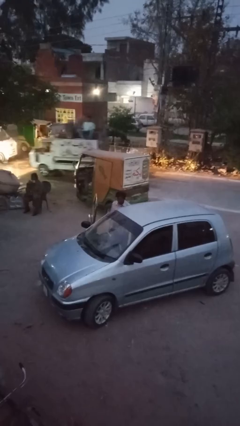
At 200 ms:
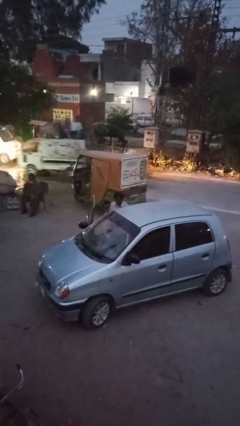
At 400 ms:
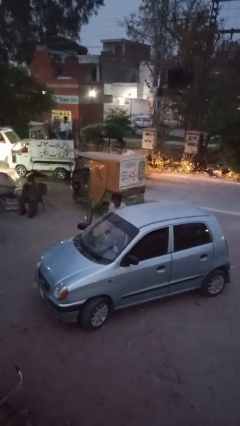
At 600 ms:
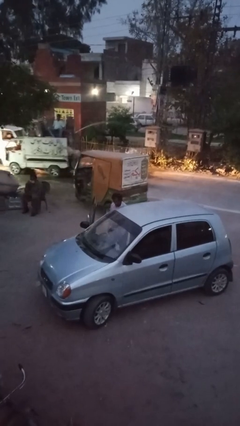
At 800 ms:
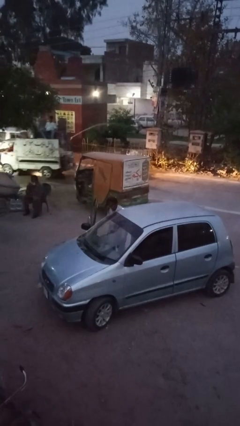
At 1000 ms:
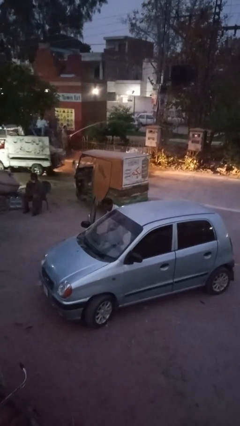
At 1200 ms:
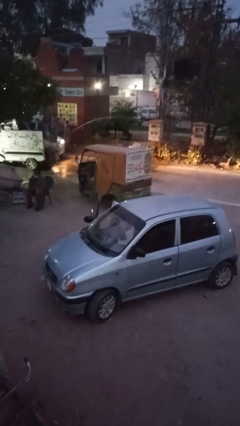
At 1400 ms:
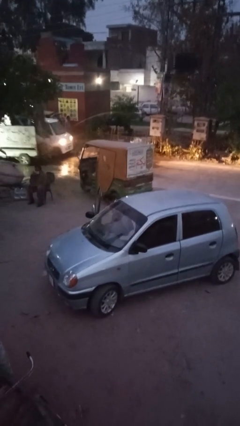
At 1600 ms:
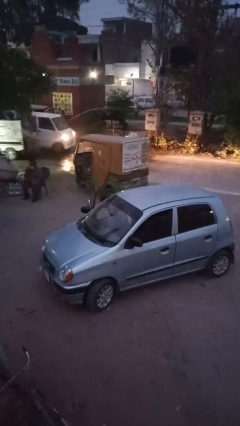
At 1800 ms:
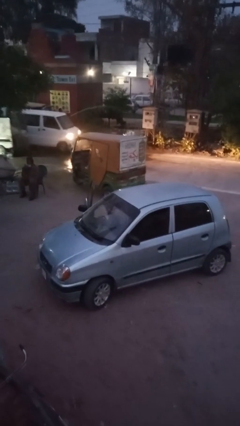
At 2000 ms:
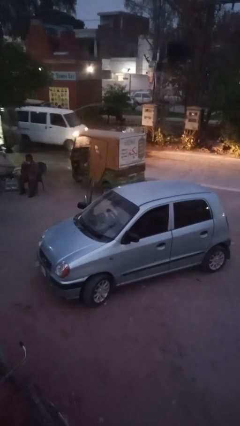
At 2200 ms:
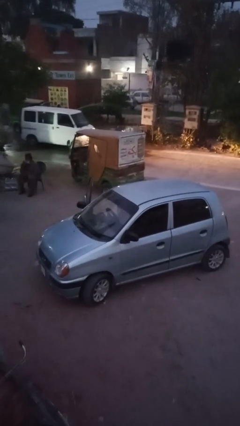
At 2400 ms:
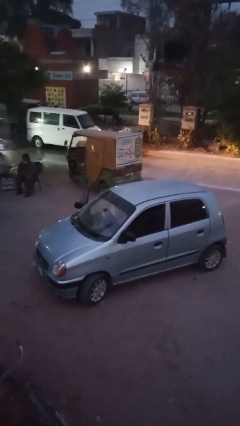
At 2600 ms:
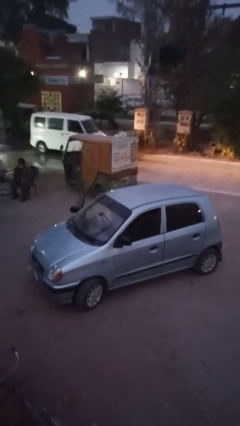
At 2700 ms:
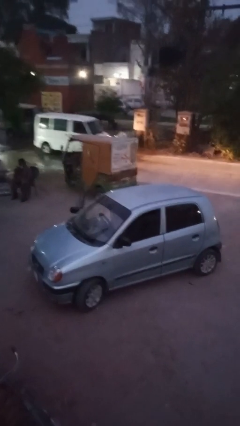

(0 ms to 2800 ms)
person enters car

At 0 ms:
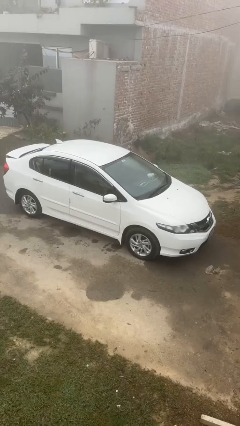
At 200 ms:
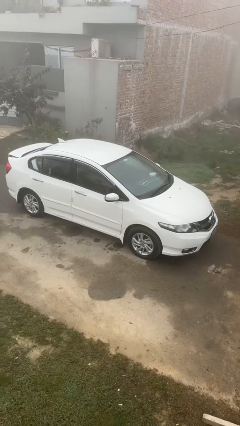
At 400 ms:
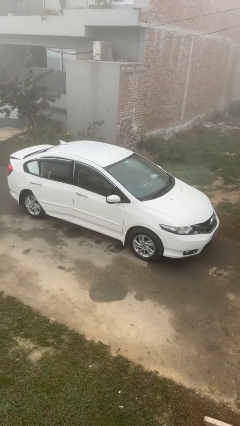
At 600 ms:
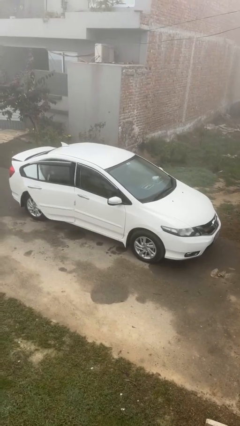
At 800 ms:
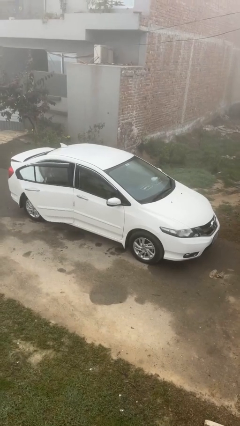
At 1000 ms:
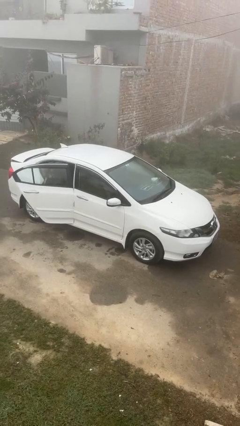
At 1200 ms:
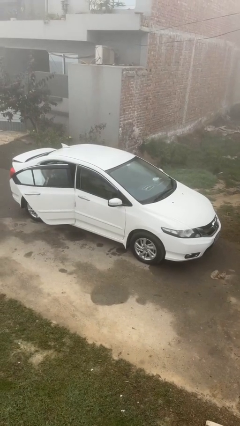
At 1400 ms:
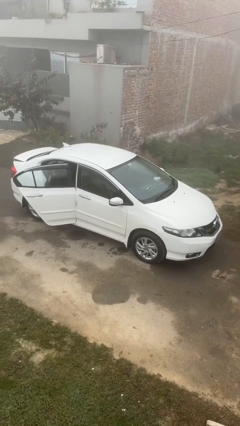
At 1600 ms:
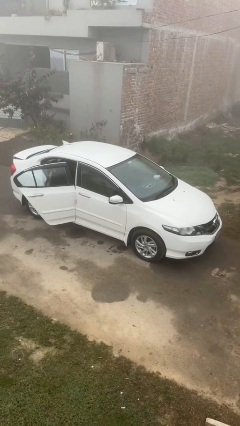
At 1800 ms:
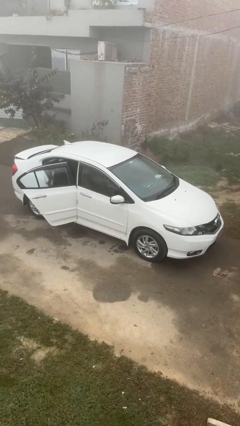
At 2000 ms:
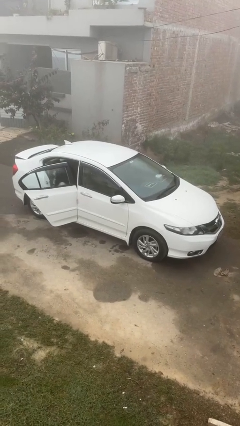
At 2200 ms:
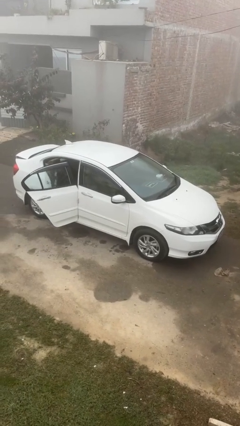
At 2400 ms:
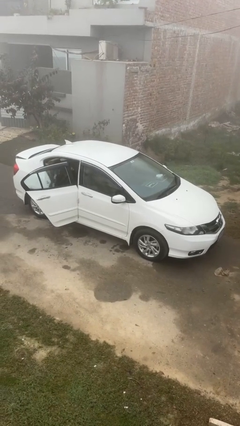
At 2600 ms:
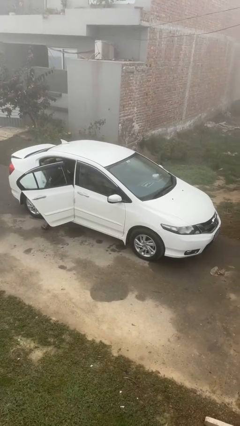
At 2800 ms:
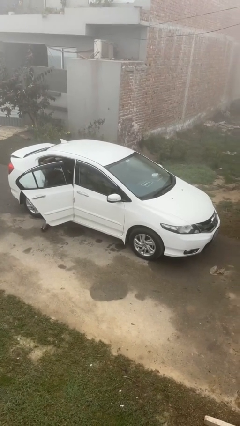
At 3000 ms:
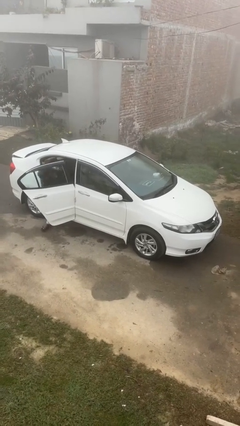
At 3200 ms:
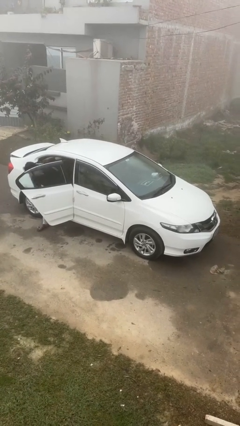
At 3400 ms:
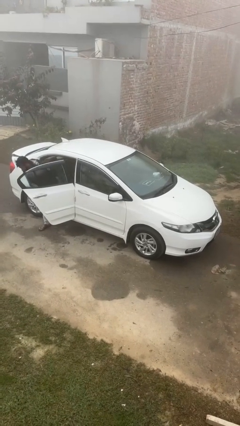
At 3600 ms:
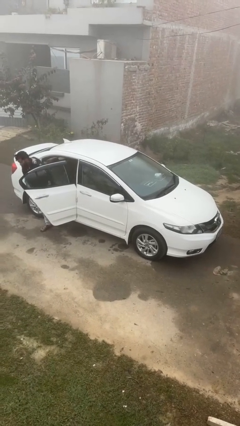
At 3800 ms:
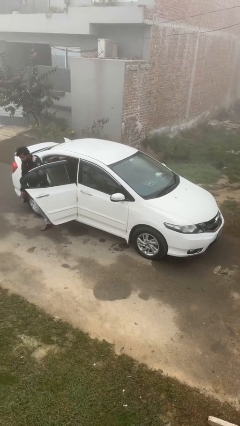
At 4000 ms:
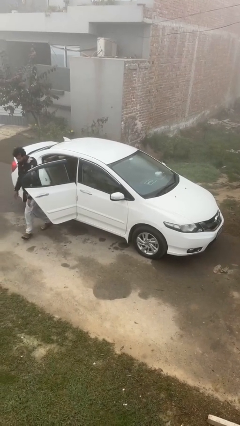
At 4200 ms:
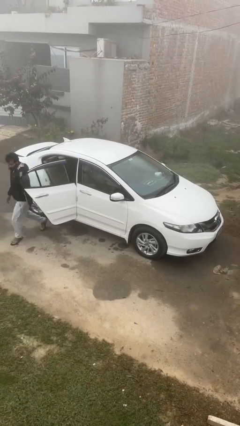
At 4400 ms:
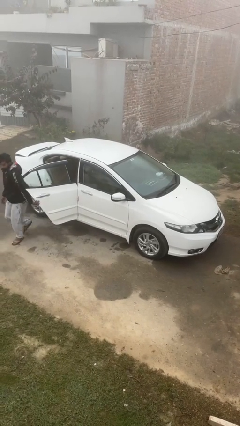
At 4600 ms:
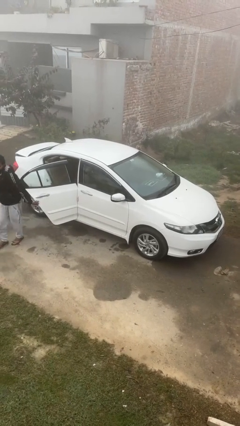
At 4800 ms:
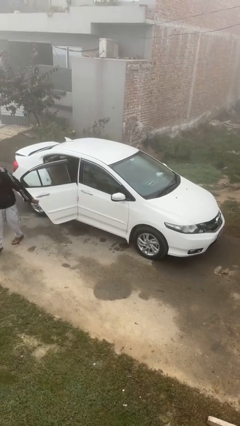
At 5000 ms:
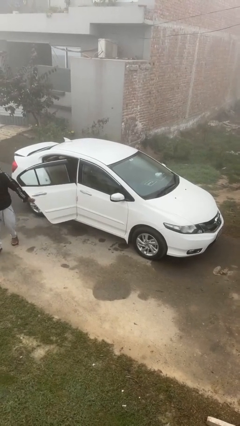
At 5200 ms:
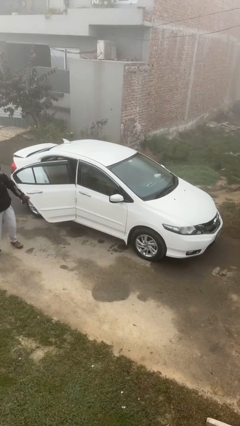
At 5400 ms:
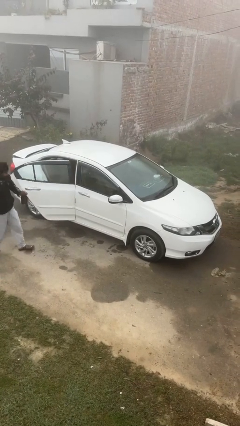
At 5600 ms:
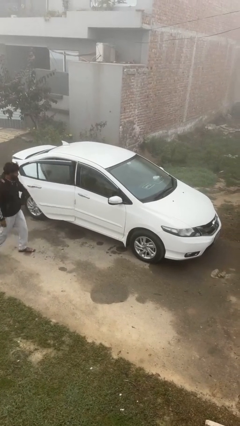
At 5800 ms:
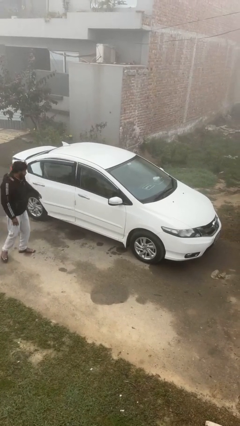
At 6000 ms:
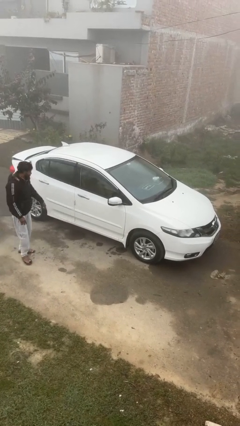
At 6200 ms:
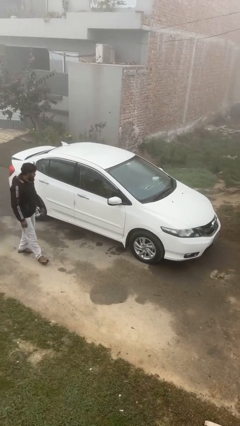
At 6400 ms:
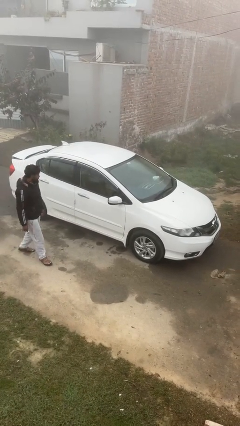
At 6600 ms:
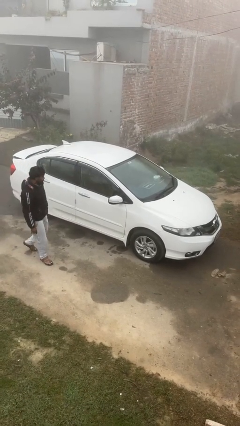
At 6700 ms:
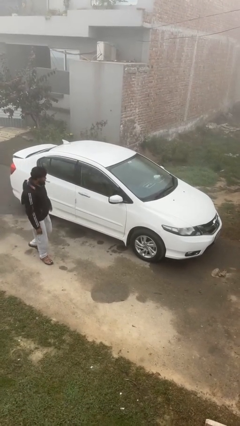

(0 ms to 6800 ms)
car drops off person

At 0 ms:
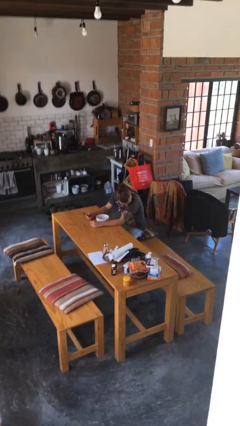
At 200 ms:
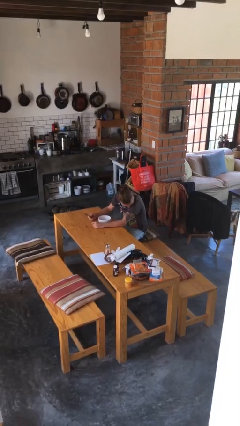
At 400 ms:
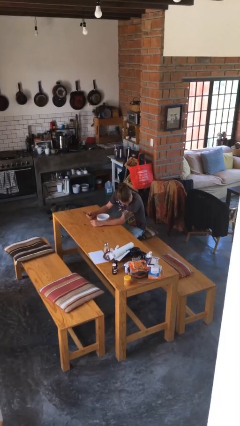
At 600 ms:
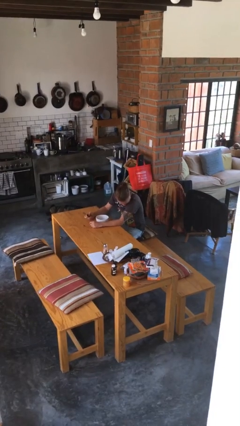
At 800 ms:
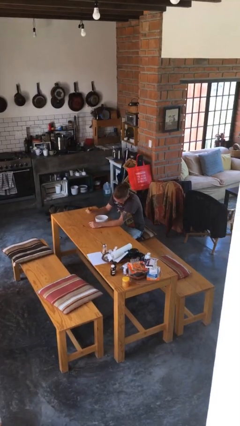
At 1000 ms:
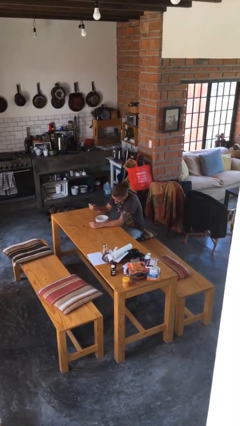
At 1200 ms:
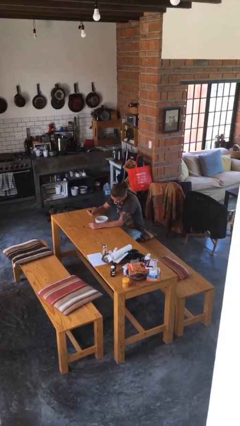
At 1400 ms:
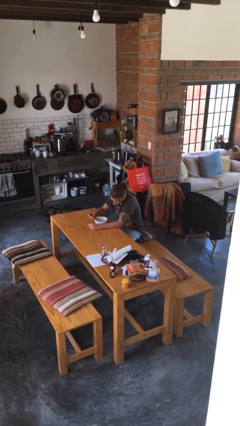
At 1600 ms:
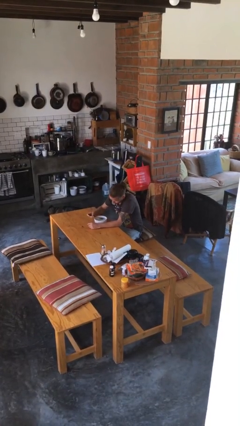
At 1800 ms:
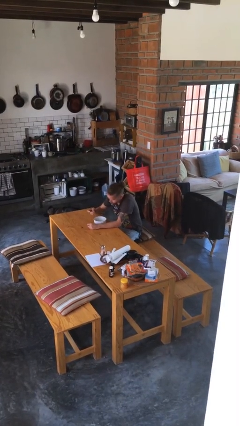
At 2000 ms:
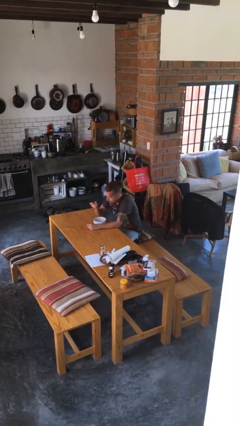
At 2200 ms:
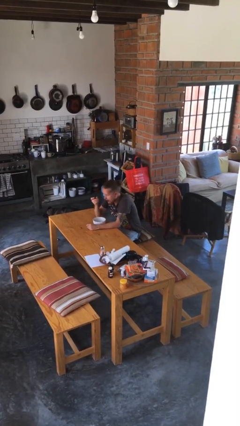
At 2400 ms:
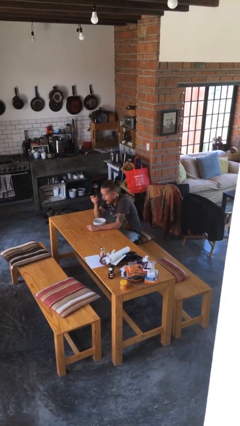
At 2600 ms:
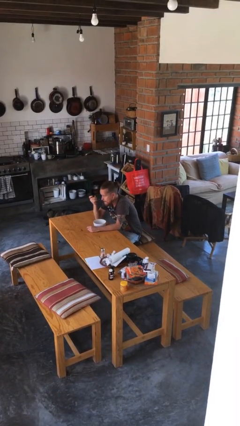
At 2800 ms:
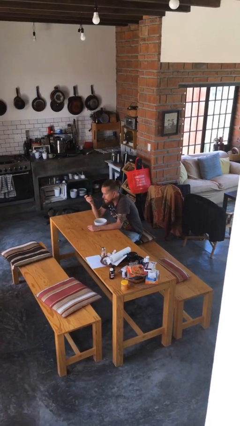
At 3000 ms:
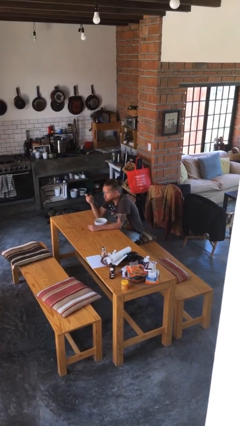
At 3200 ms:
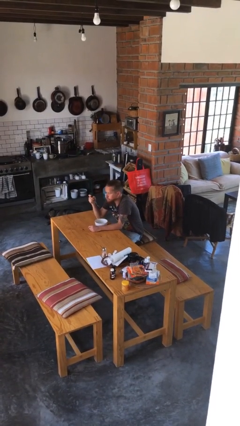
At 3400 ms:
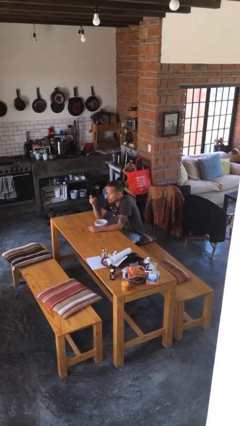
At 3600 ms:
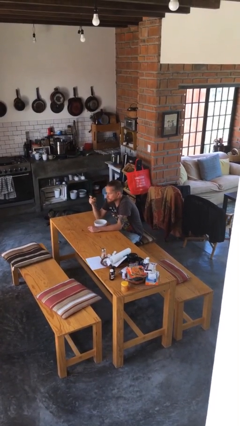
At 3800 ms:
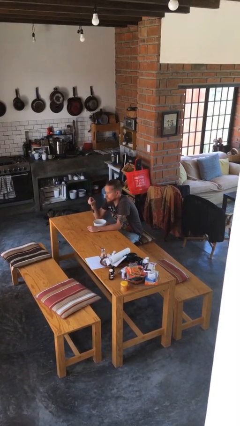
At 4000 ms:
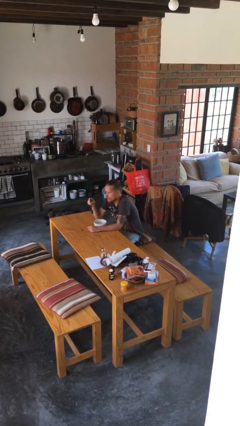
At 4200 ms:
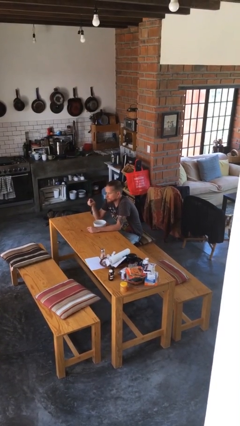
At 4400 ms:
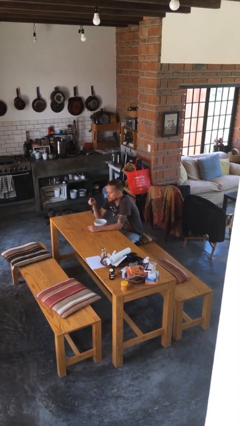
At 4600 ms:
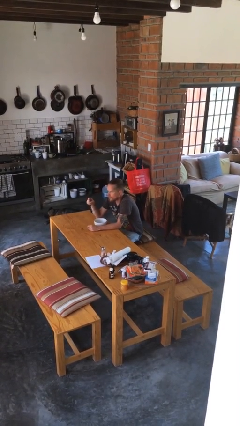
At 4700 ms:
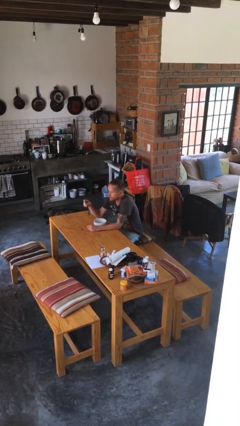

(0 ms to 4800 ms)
person eats with utensil

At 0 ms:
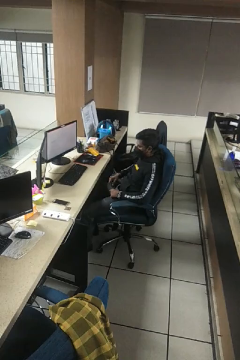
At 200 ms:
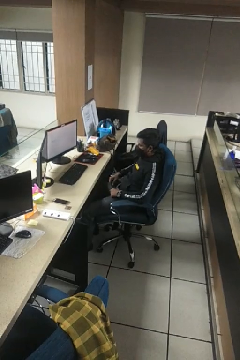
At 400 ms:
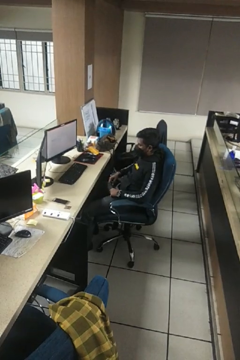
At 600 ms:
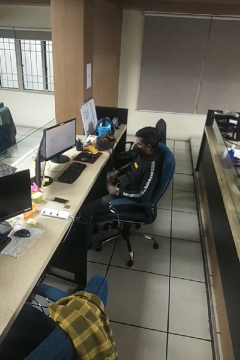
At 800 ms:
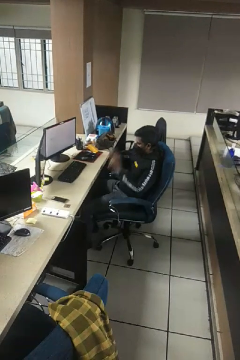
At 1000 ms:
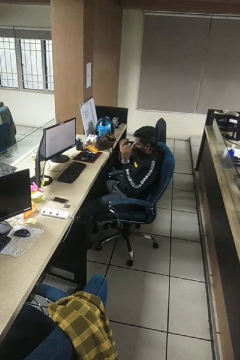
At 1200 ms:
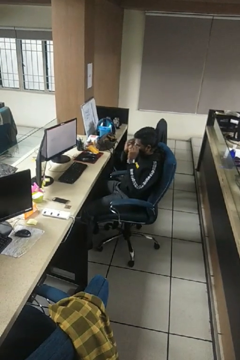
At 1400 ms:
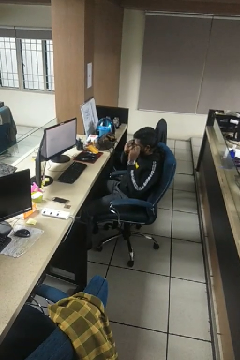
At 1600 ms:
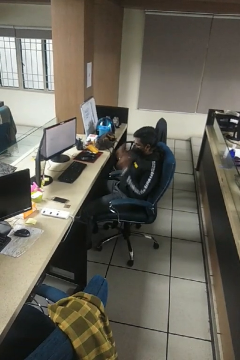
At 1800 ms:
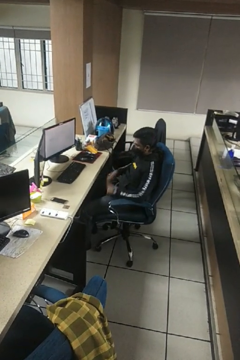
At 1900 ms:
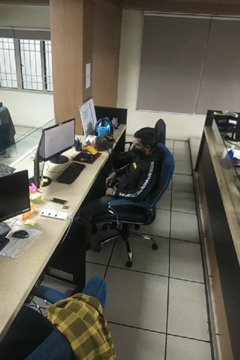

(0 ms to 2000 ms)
person puts on glasses

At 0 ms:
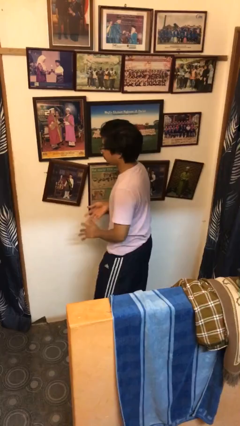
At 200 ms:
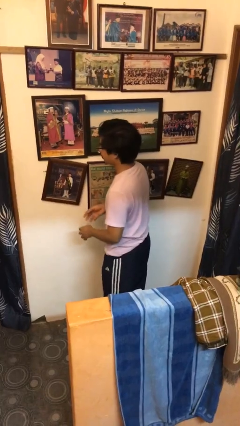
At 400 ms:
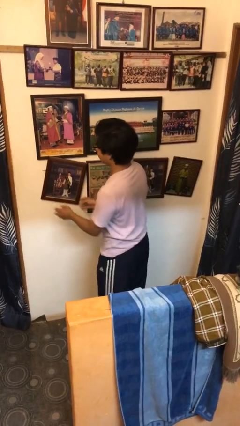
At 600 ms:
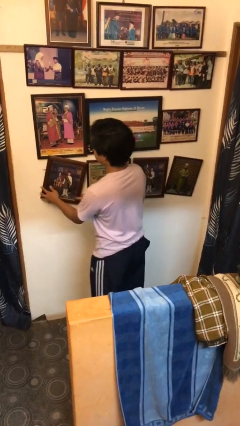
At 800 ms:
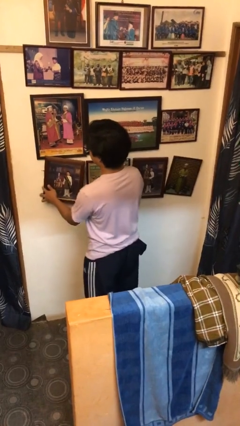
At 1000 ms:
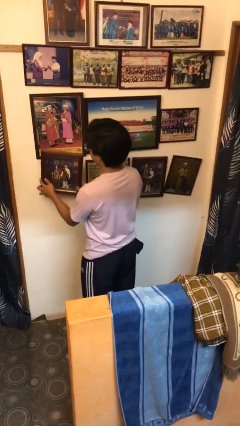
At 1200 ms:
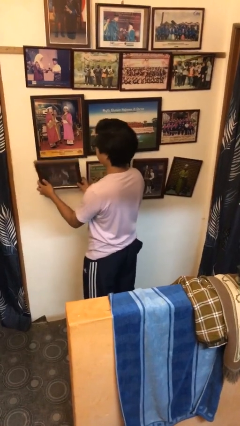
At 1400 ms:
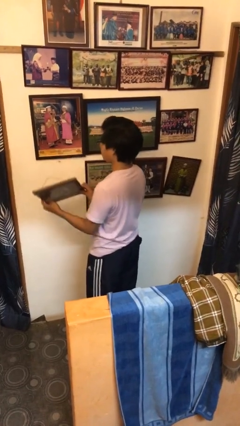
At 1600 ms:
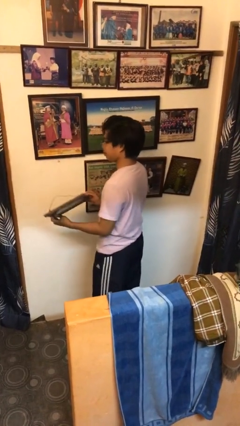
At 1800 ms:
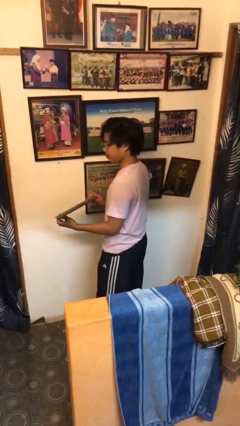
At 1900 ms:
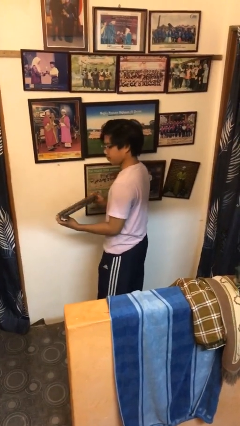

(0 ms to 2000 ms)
person takes down picture frame
